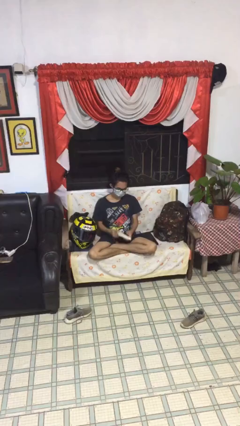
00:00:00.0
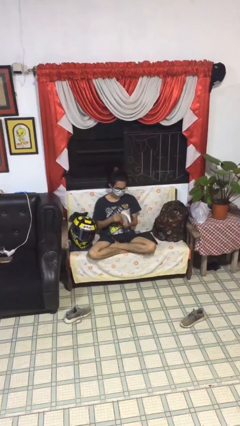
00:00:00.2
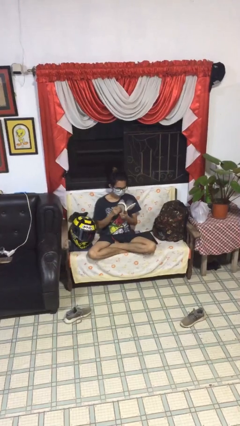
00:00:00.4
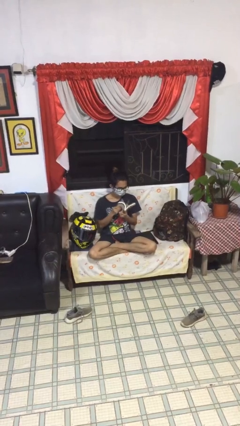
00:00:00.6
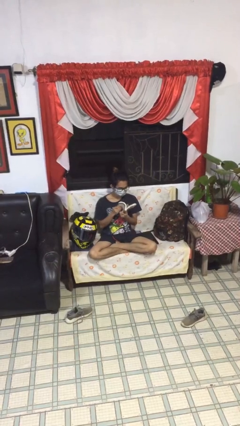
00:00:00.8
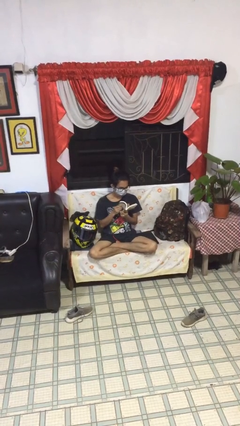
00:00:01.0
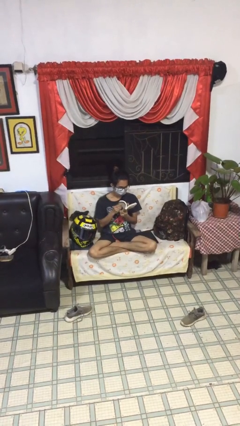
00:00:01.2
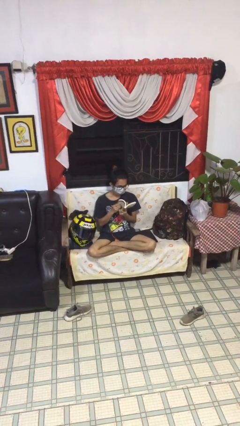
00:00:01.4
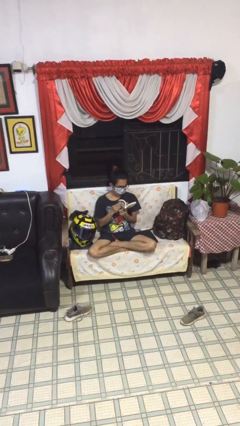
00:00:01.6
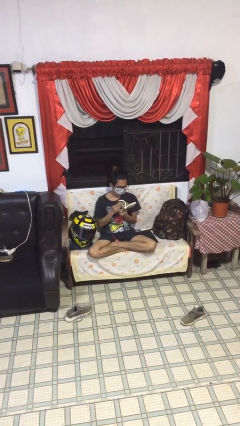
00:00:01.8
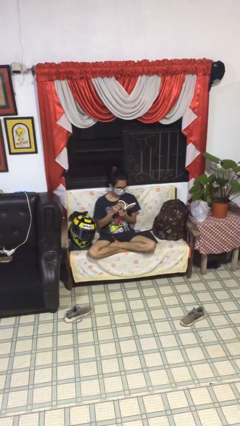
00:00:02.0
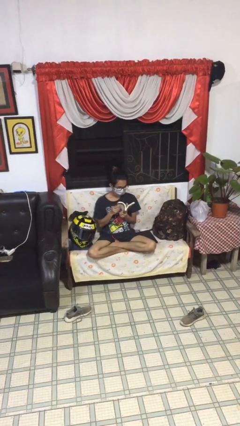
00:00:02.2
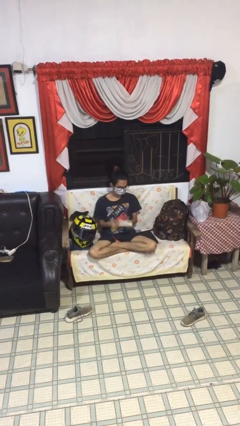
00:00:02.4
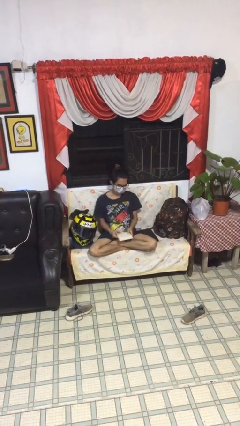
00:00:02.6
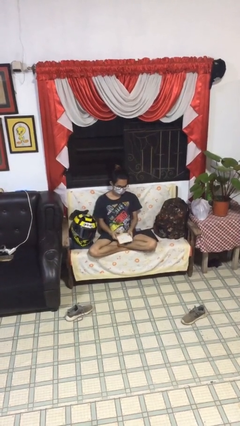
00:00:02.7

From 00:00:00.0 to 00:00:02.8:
person reads document

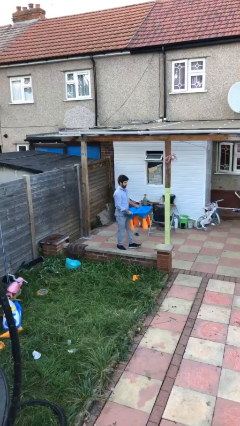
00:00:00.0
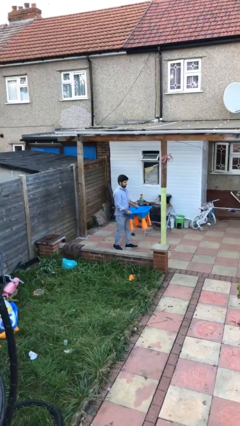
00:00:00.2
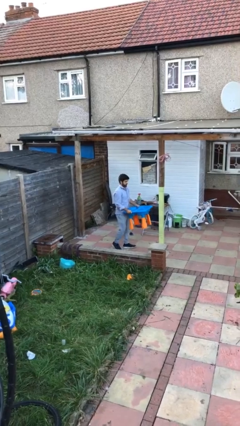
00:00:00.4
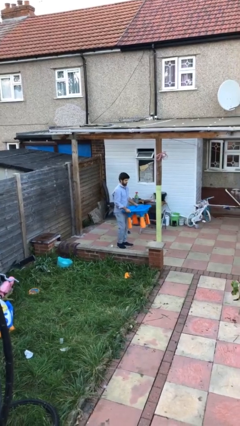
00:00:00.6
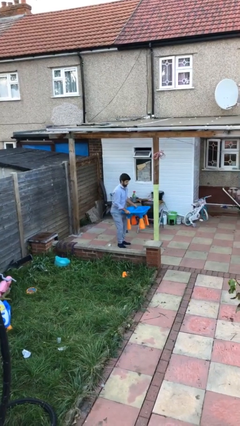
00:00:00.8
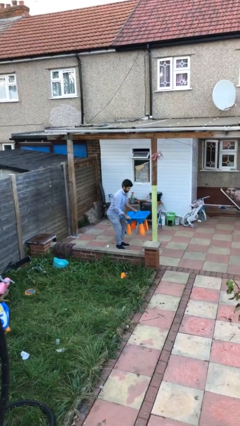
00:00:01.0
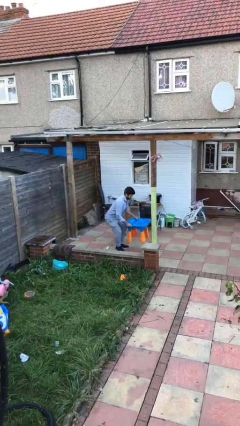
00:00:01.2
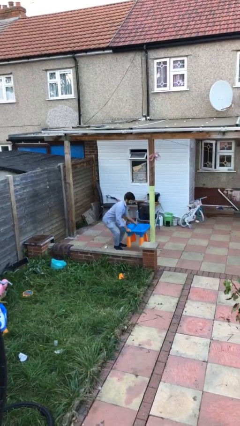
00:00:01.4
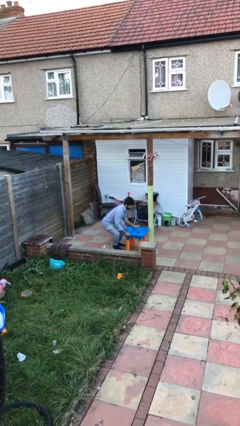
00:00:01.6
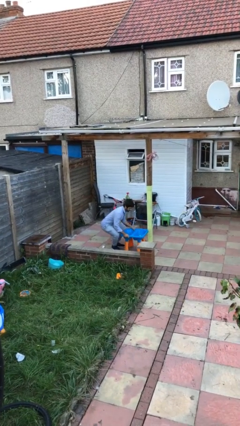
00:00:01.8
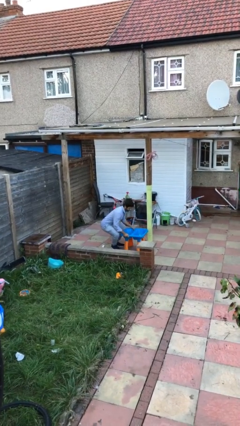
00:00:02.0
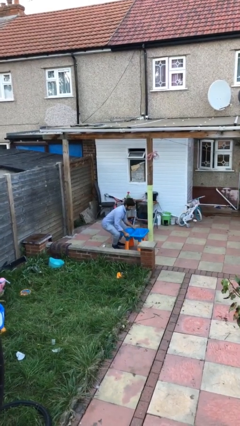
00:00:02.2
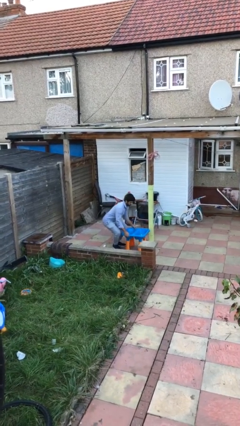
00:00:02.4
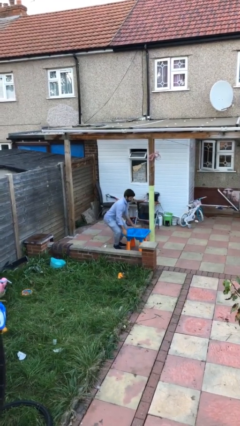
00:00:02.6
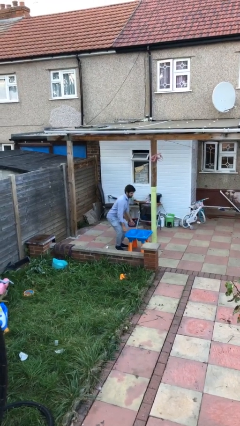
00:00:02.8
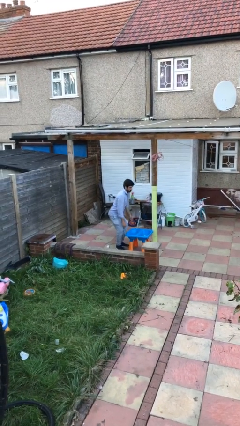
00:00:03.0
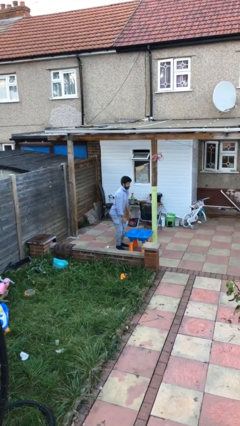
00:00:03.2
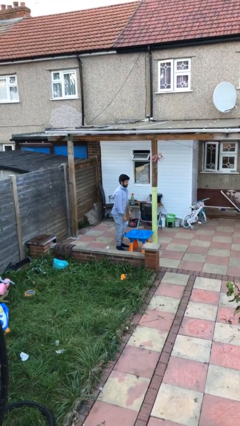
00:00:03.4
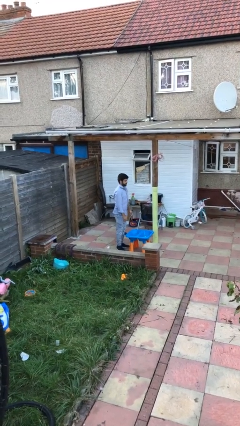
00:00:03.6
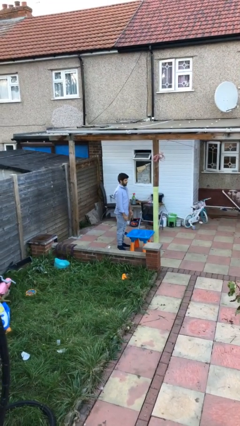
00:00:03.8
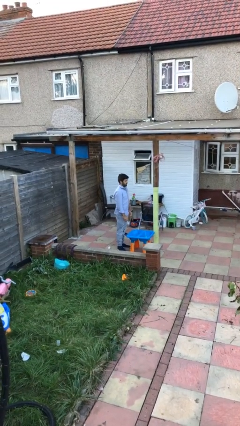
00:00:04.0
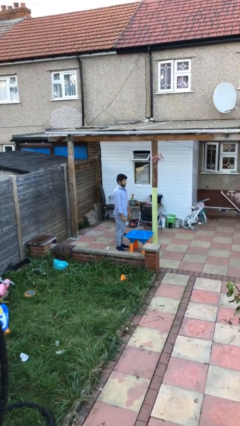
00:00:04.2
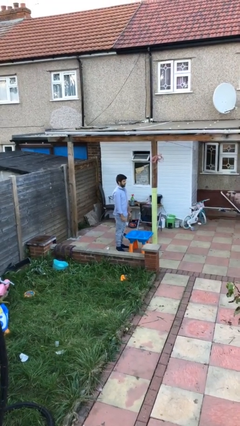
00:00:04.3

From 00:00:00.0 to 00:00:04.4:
person puts down object on floor

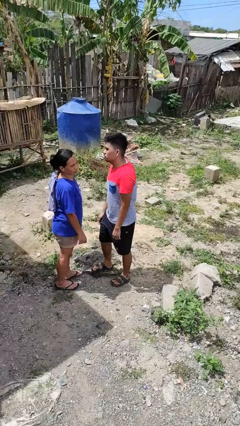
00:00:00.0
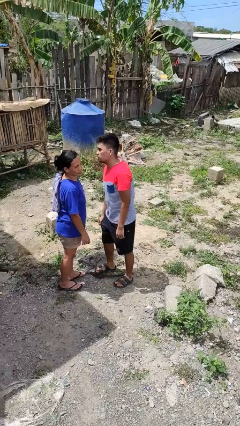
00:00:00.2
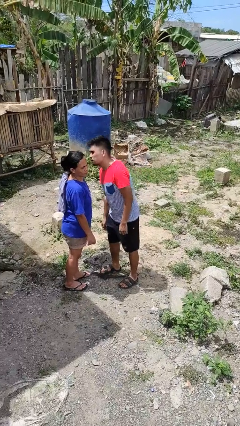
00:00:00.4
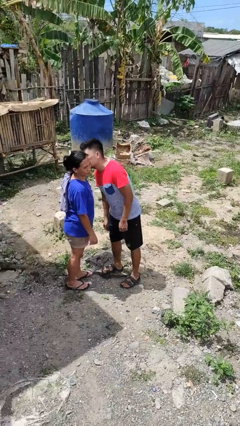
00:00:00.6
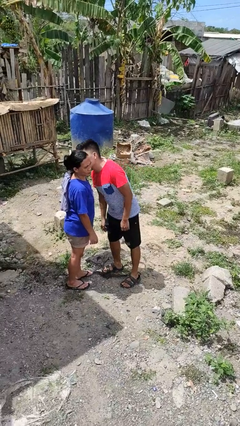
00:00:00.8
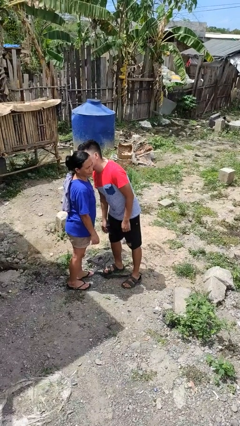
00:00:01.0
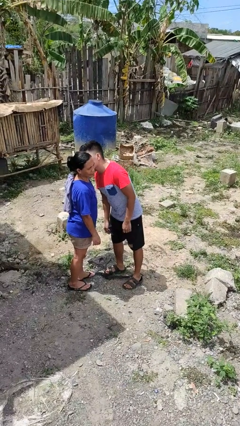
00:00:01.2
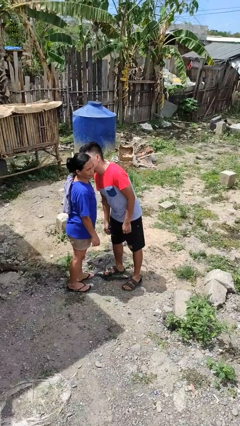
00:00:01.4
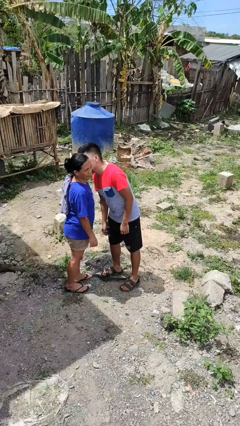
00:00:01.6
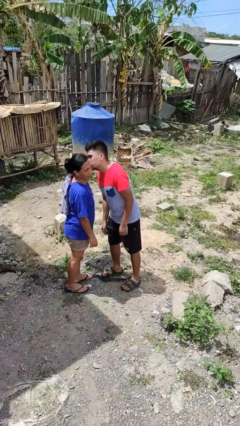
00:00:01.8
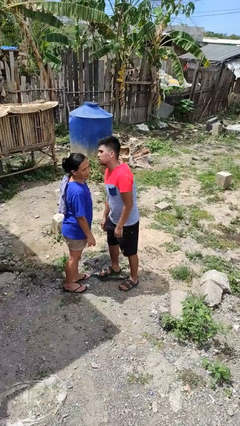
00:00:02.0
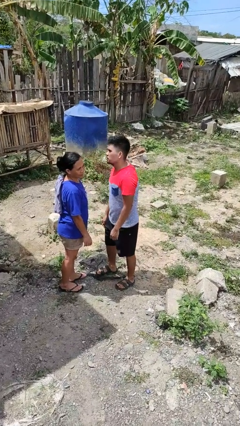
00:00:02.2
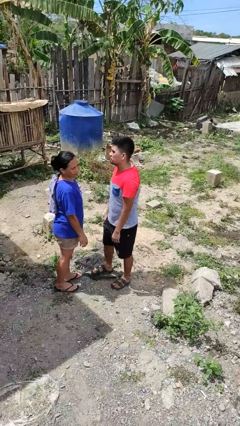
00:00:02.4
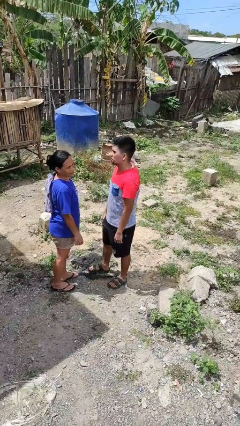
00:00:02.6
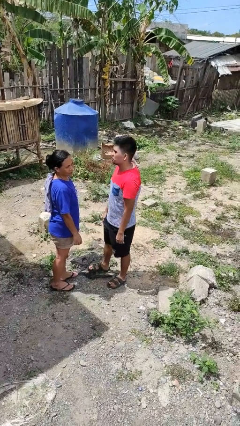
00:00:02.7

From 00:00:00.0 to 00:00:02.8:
person kisses cheek of person

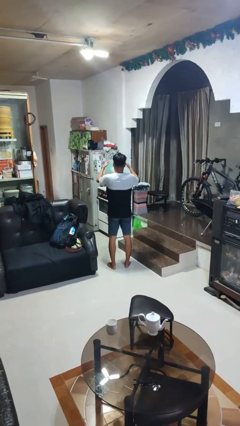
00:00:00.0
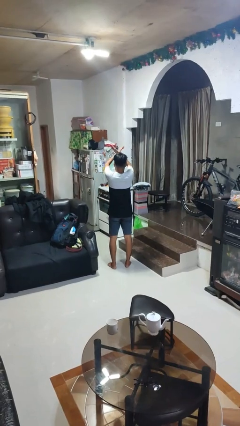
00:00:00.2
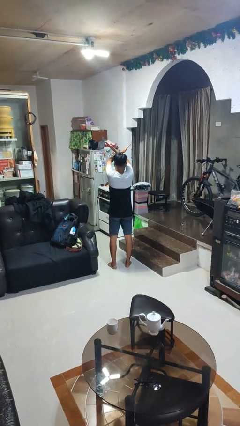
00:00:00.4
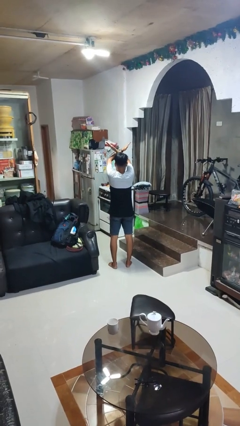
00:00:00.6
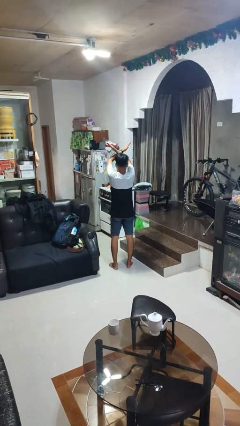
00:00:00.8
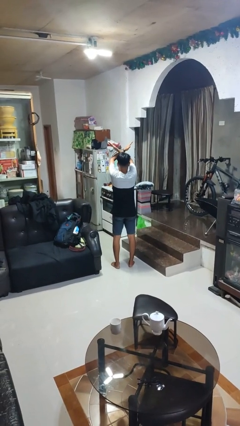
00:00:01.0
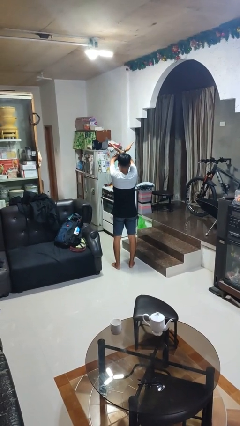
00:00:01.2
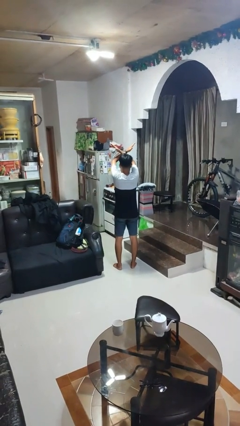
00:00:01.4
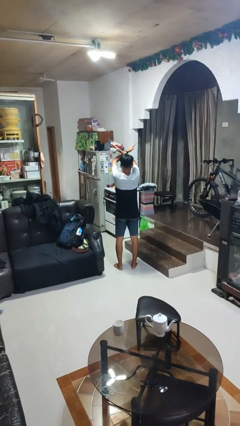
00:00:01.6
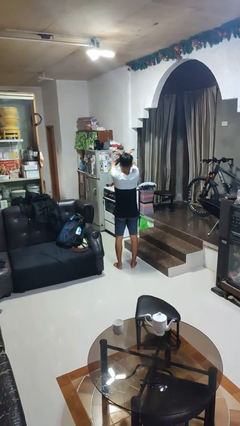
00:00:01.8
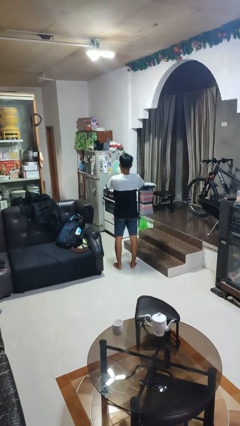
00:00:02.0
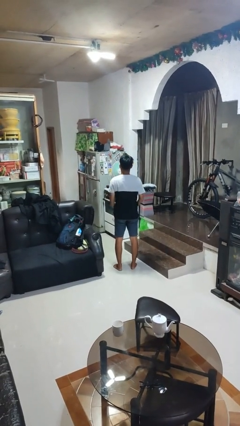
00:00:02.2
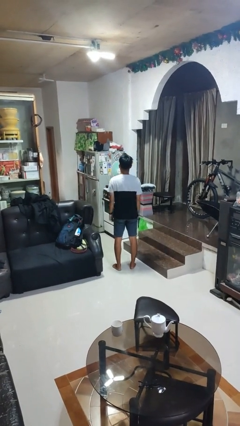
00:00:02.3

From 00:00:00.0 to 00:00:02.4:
person gestures arms x

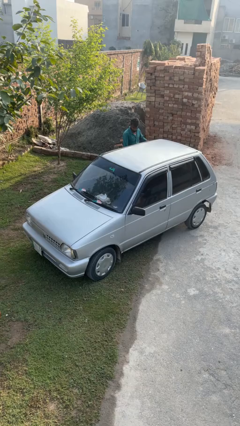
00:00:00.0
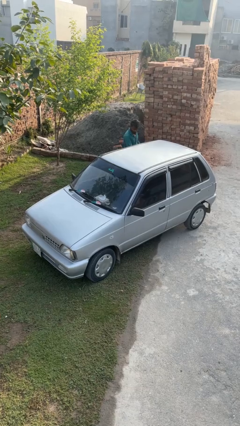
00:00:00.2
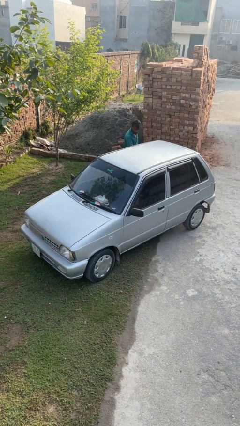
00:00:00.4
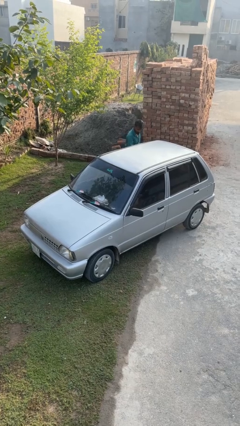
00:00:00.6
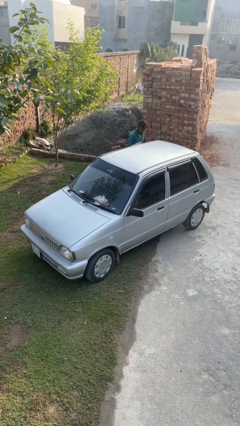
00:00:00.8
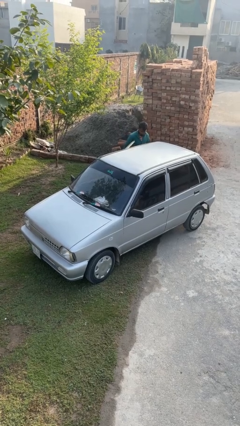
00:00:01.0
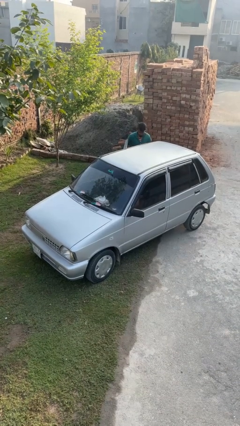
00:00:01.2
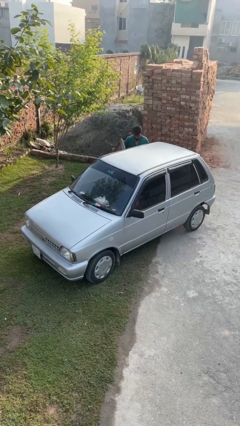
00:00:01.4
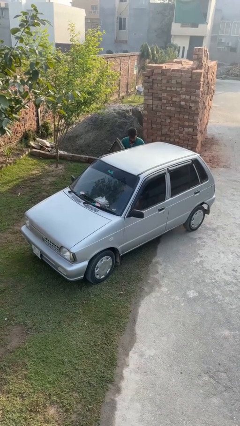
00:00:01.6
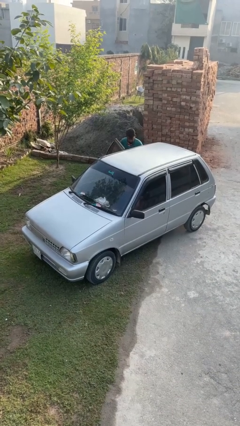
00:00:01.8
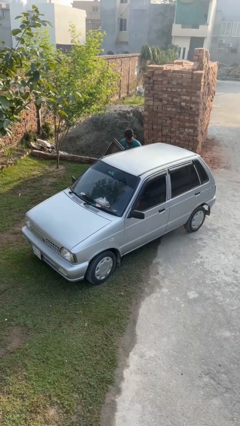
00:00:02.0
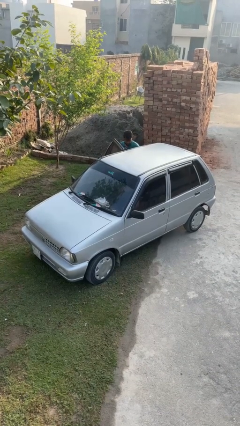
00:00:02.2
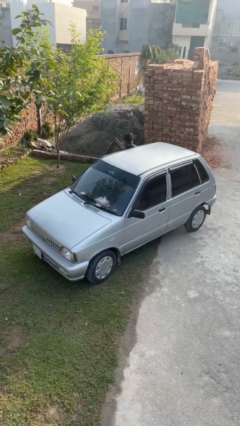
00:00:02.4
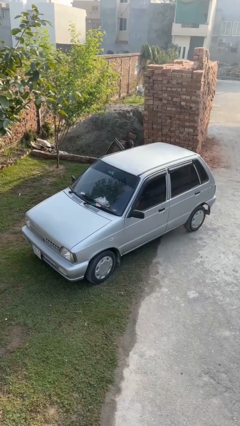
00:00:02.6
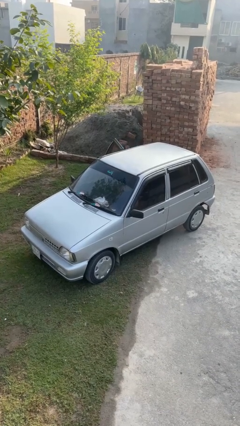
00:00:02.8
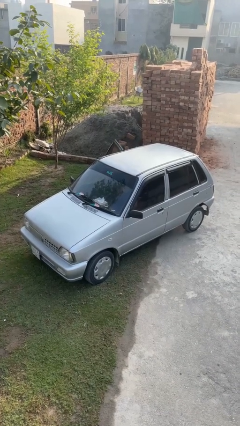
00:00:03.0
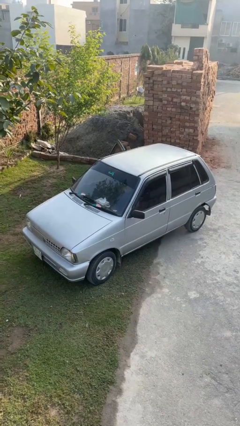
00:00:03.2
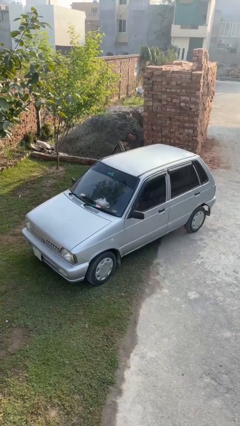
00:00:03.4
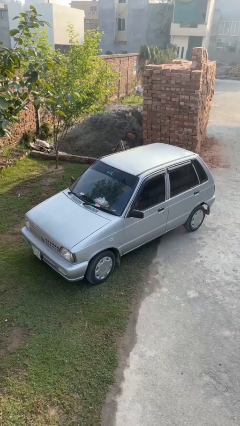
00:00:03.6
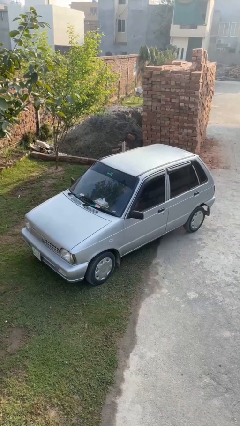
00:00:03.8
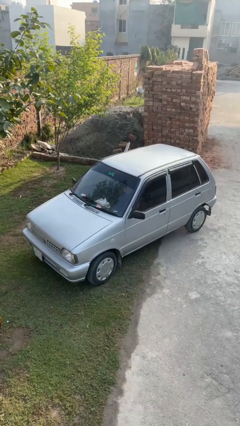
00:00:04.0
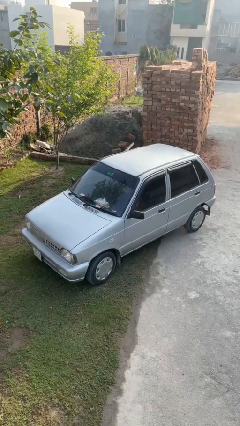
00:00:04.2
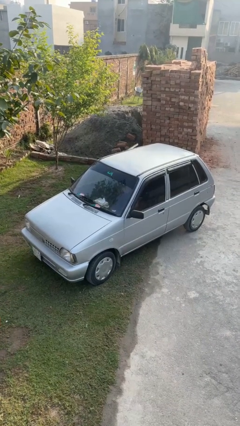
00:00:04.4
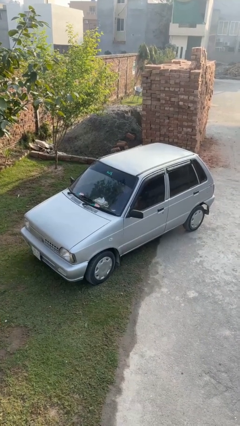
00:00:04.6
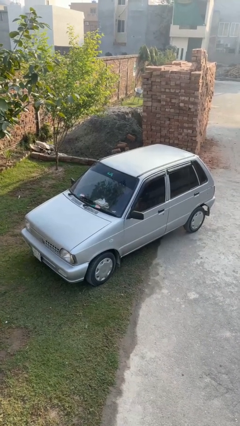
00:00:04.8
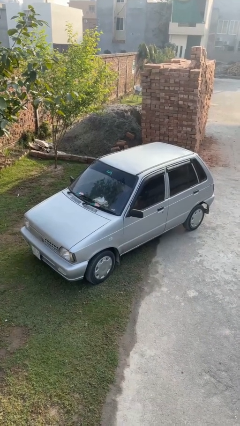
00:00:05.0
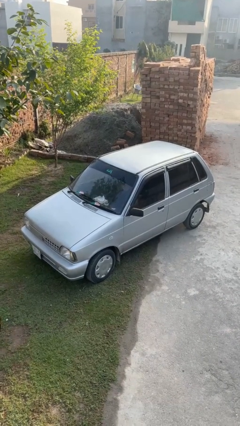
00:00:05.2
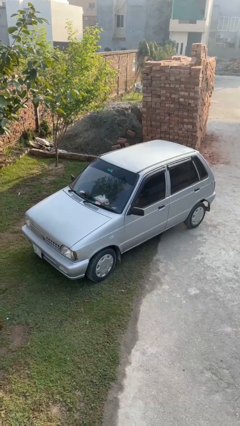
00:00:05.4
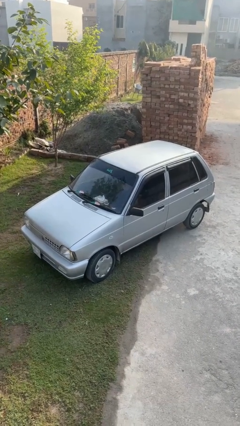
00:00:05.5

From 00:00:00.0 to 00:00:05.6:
car picks up person
